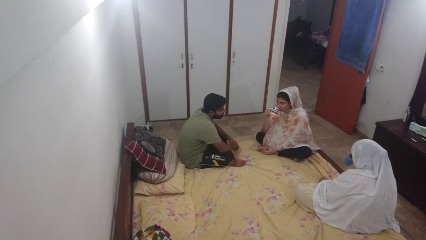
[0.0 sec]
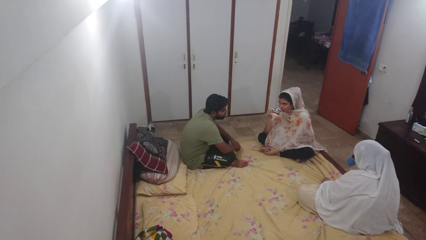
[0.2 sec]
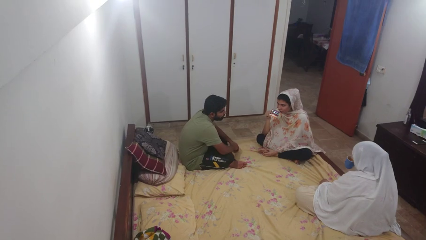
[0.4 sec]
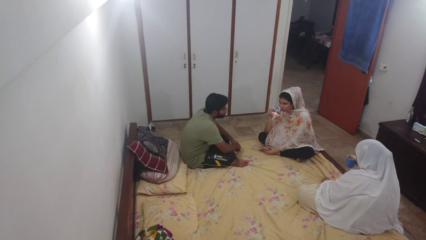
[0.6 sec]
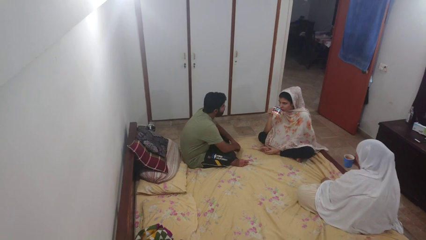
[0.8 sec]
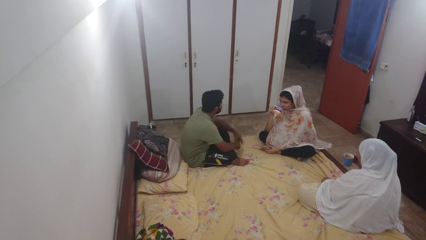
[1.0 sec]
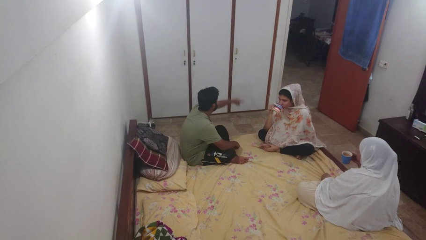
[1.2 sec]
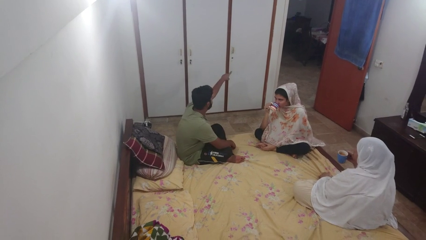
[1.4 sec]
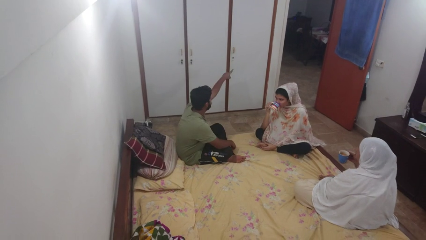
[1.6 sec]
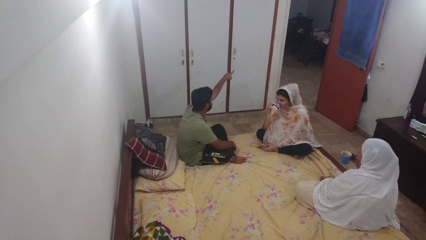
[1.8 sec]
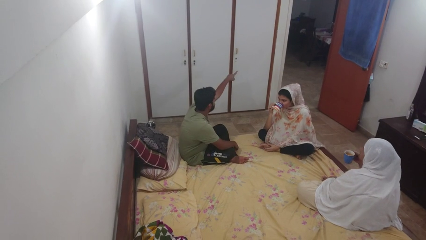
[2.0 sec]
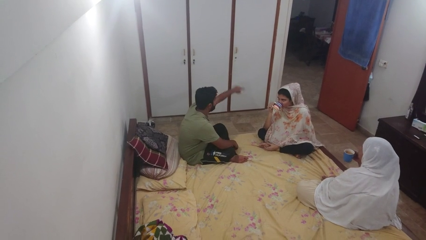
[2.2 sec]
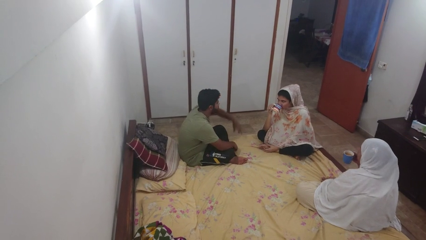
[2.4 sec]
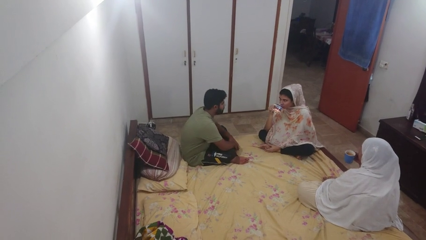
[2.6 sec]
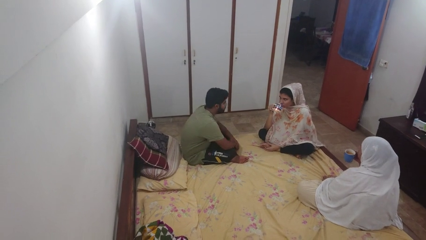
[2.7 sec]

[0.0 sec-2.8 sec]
person points at person

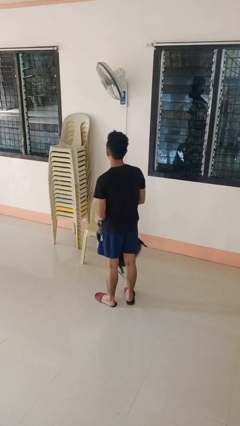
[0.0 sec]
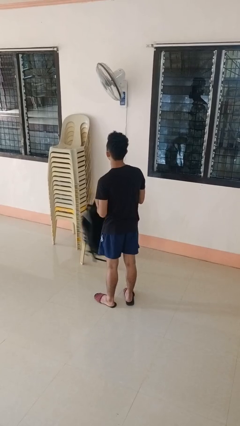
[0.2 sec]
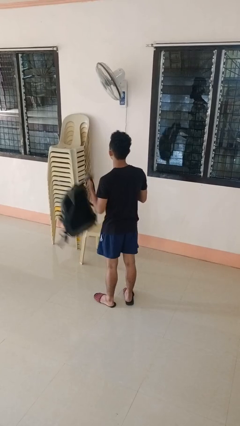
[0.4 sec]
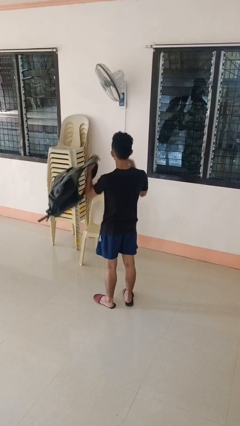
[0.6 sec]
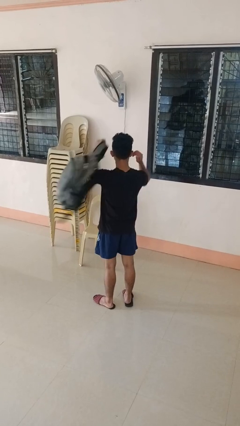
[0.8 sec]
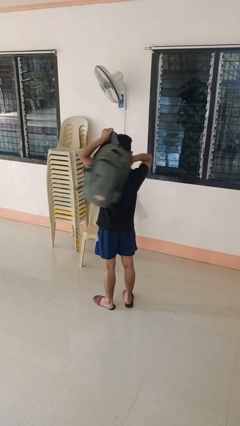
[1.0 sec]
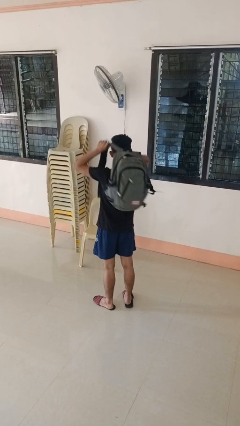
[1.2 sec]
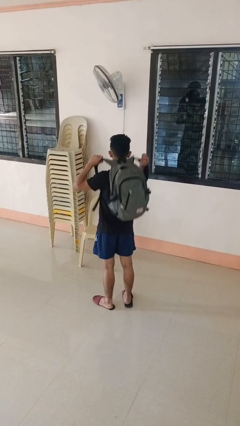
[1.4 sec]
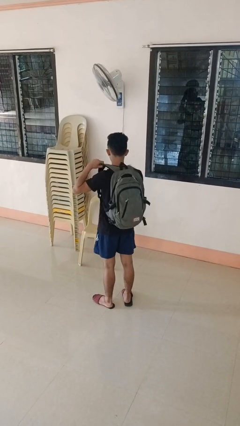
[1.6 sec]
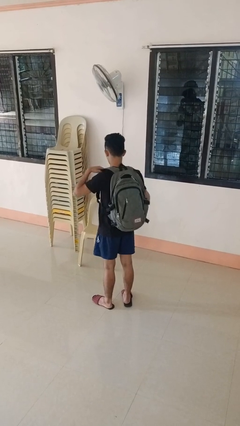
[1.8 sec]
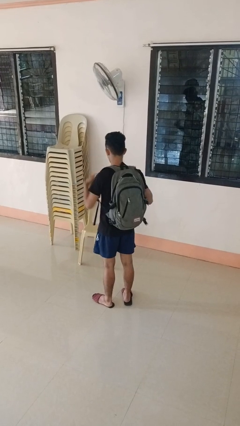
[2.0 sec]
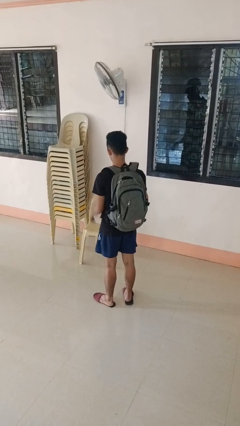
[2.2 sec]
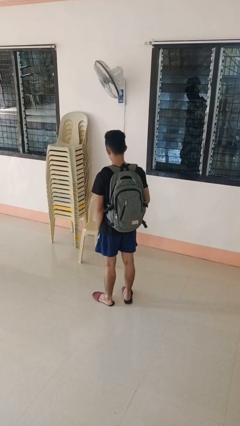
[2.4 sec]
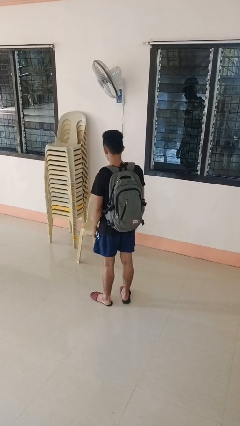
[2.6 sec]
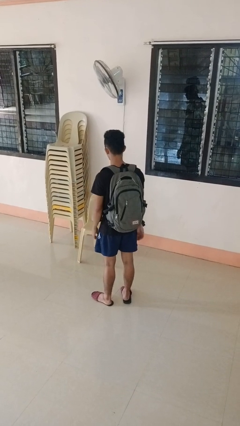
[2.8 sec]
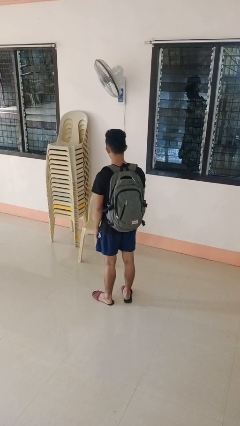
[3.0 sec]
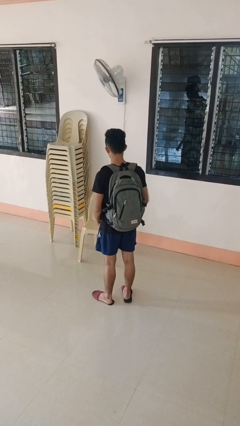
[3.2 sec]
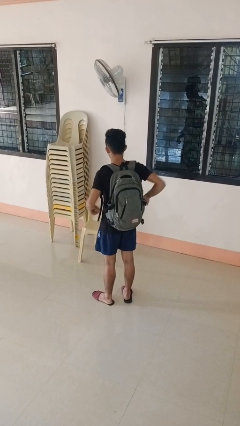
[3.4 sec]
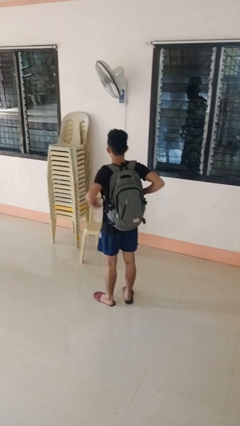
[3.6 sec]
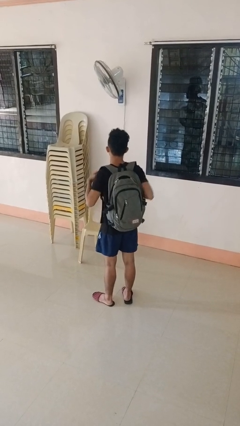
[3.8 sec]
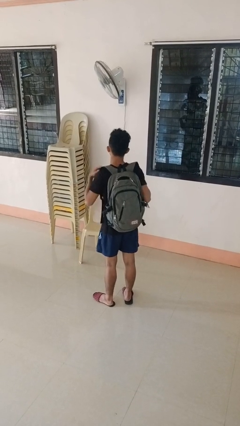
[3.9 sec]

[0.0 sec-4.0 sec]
person puts on backpack

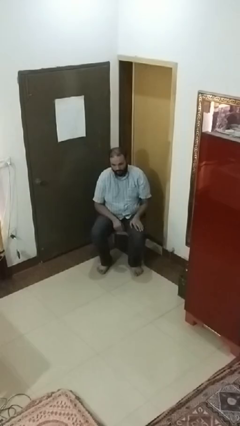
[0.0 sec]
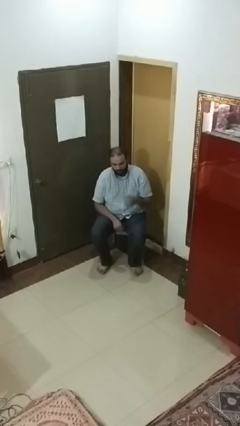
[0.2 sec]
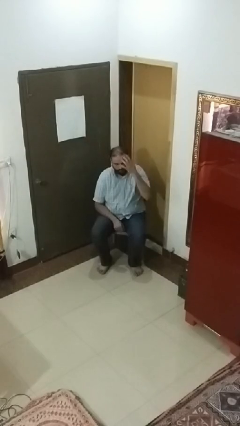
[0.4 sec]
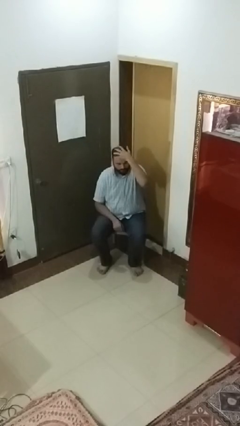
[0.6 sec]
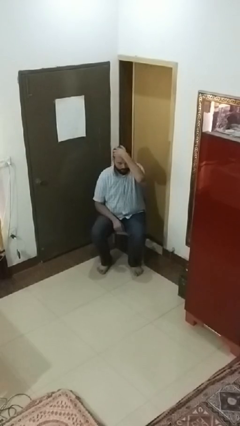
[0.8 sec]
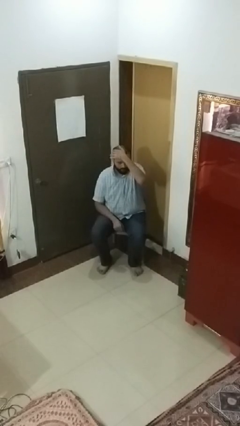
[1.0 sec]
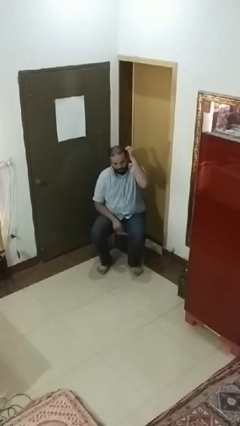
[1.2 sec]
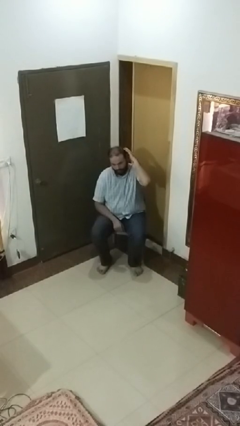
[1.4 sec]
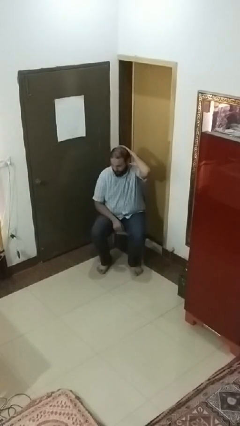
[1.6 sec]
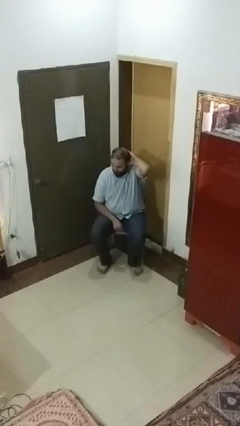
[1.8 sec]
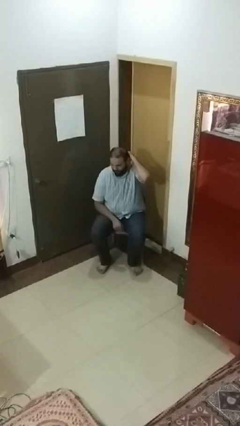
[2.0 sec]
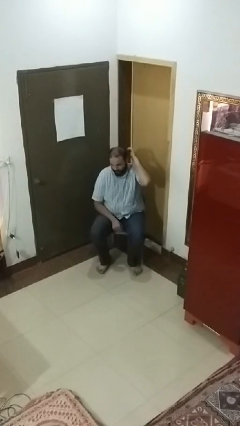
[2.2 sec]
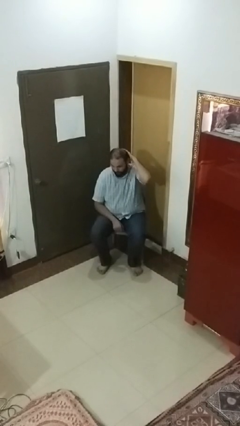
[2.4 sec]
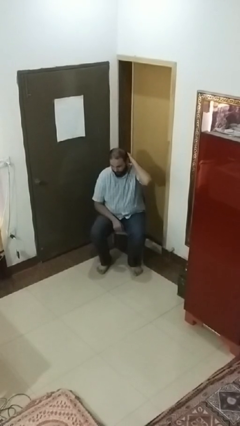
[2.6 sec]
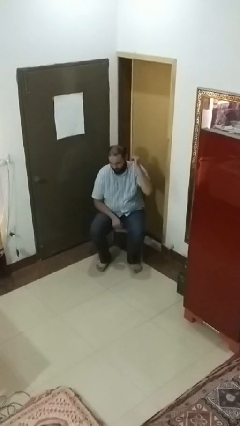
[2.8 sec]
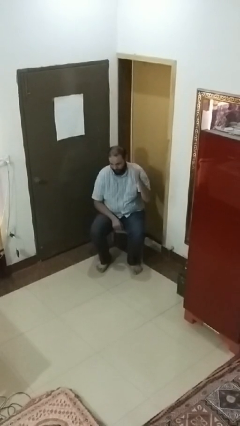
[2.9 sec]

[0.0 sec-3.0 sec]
person strokes hair

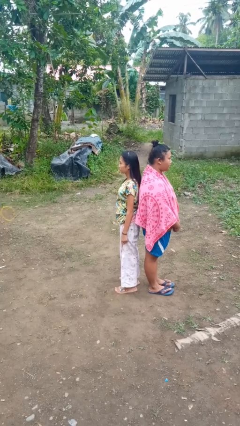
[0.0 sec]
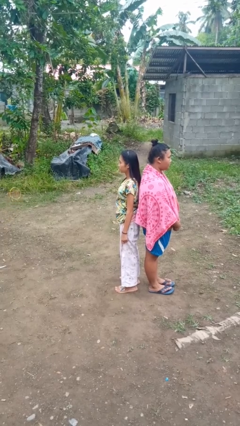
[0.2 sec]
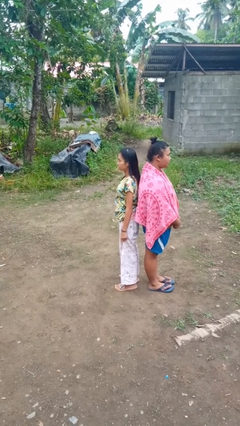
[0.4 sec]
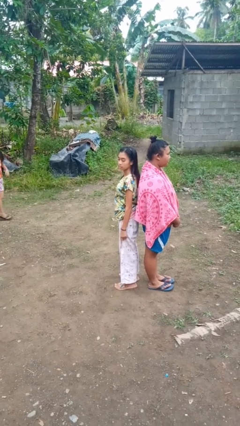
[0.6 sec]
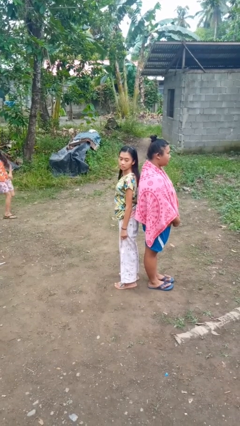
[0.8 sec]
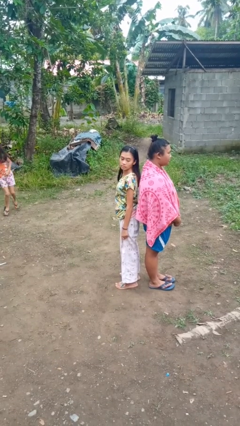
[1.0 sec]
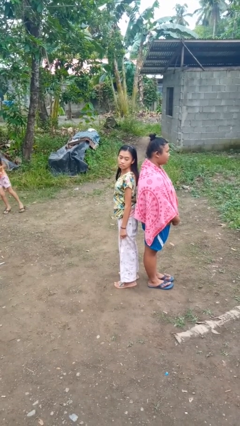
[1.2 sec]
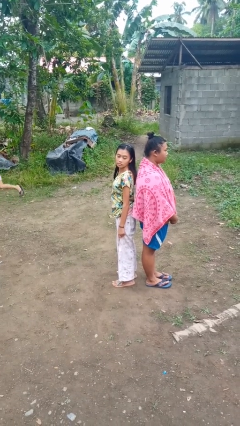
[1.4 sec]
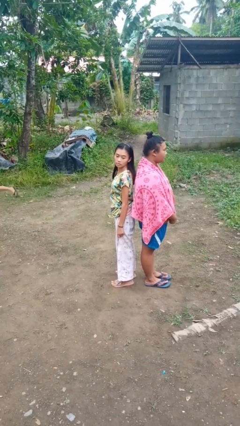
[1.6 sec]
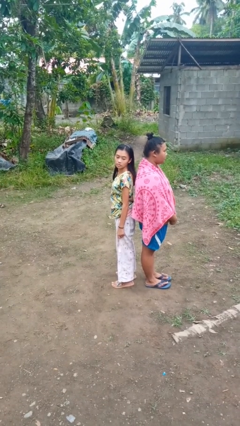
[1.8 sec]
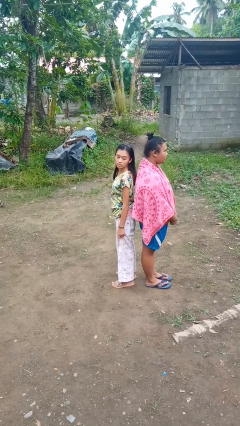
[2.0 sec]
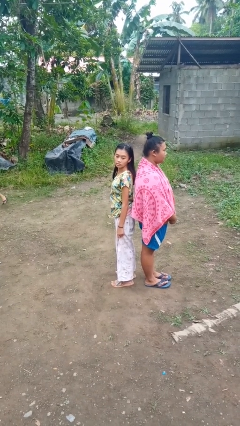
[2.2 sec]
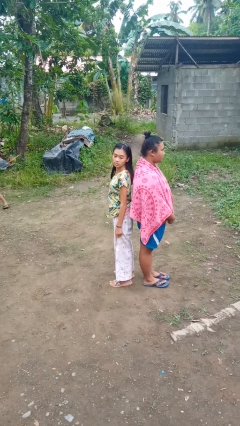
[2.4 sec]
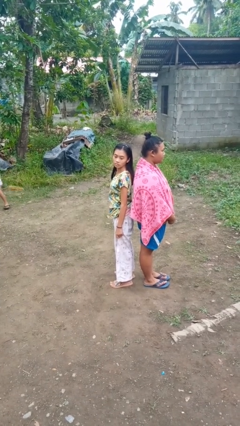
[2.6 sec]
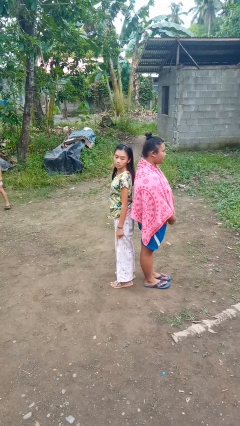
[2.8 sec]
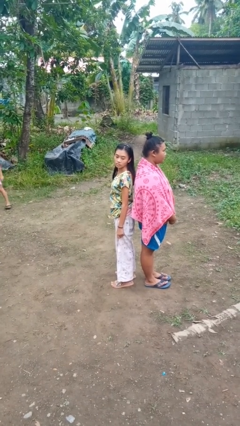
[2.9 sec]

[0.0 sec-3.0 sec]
person looks over shoulder

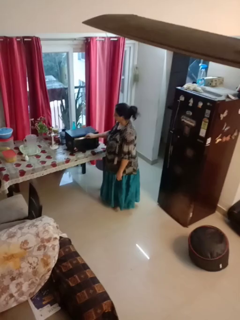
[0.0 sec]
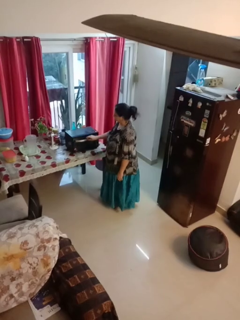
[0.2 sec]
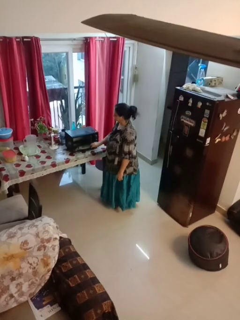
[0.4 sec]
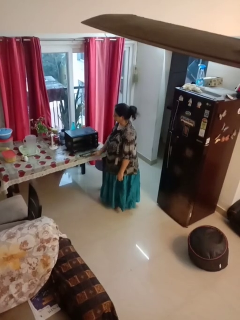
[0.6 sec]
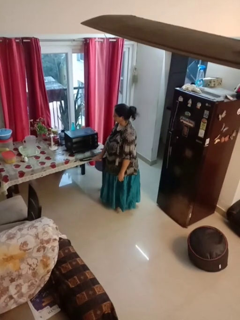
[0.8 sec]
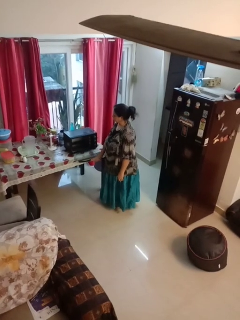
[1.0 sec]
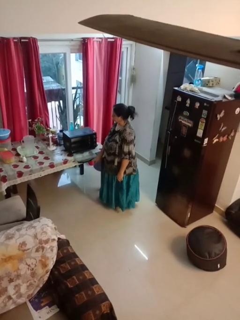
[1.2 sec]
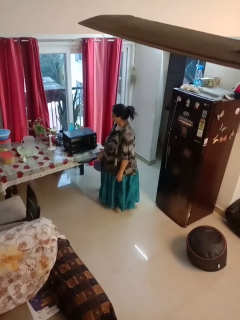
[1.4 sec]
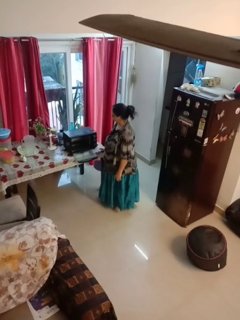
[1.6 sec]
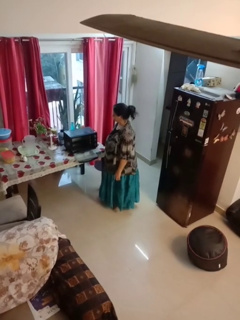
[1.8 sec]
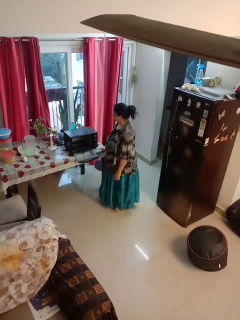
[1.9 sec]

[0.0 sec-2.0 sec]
person opens microwave

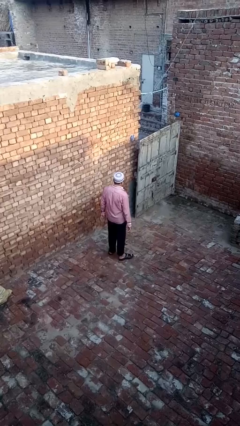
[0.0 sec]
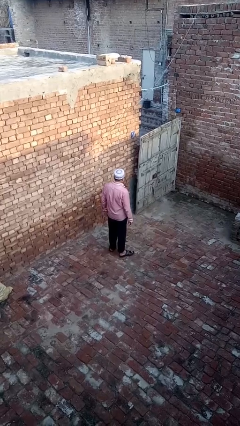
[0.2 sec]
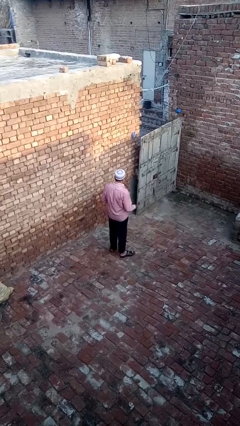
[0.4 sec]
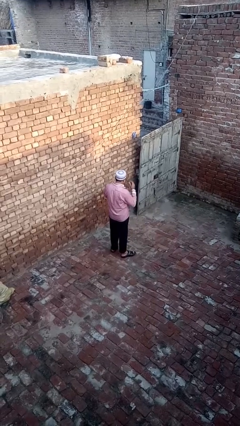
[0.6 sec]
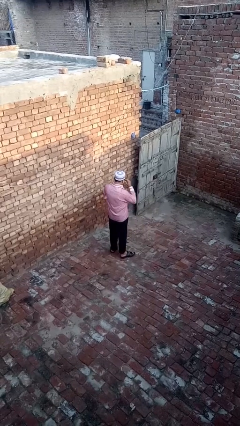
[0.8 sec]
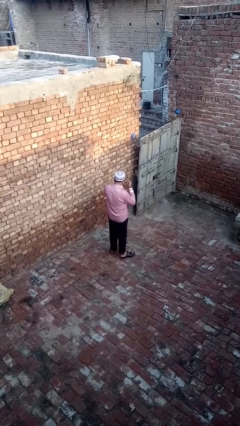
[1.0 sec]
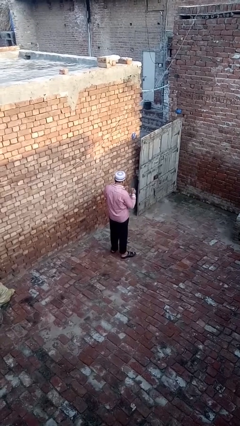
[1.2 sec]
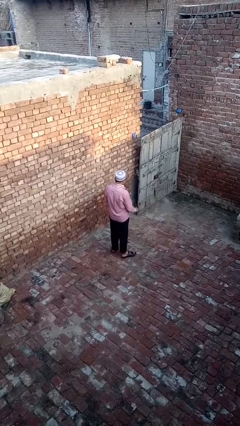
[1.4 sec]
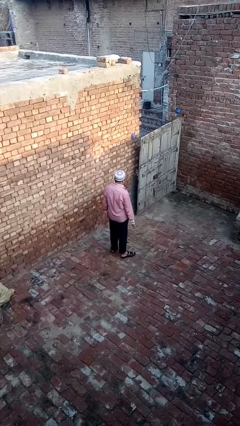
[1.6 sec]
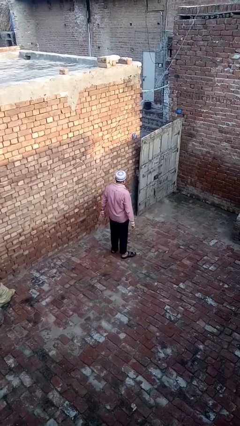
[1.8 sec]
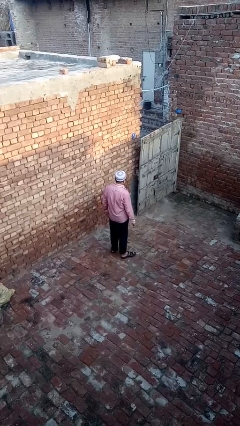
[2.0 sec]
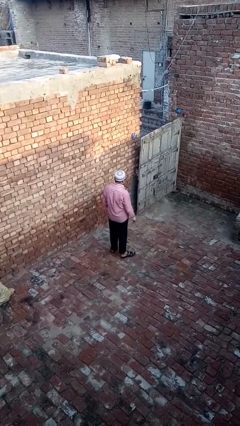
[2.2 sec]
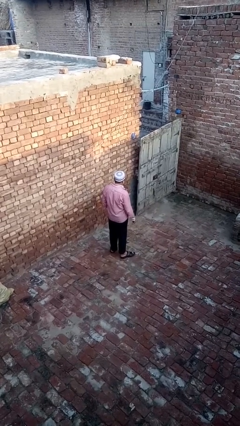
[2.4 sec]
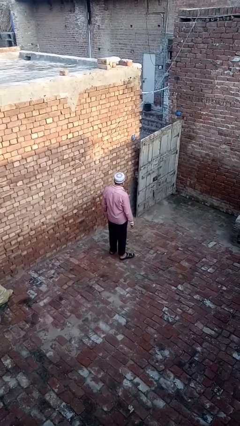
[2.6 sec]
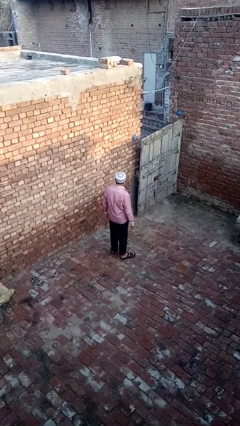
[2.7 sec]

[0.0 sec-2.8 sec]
person takes off glasses
